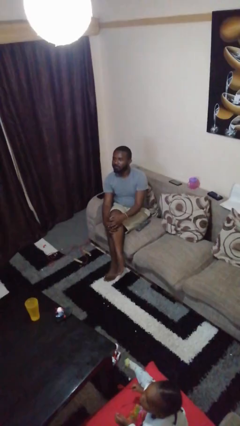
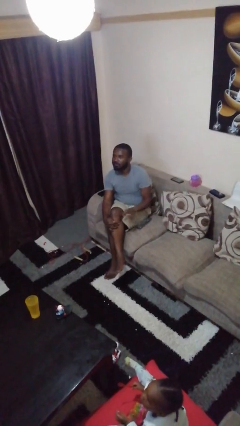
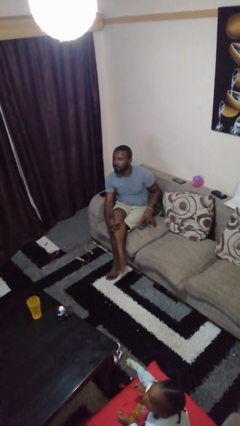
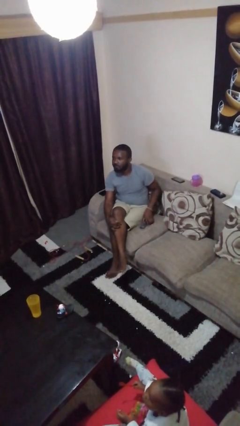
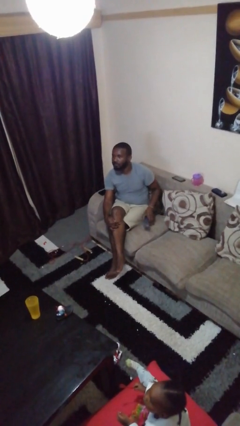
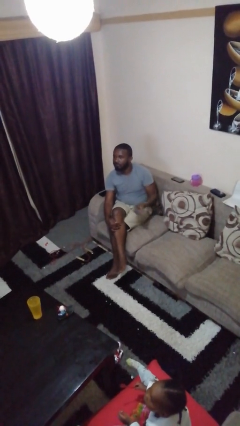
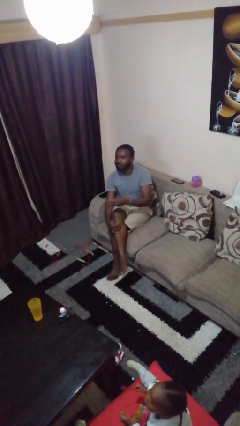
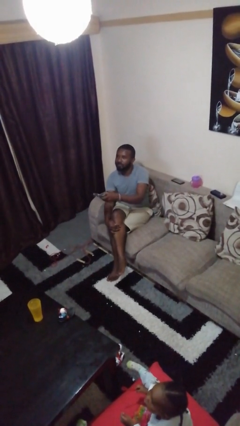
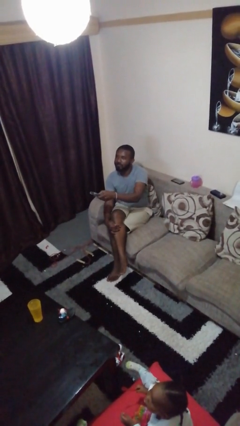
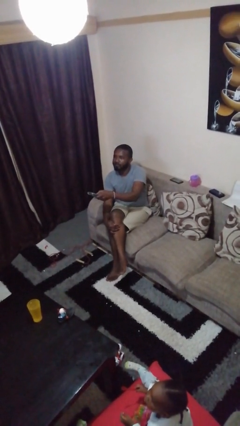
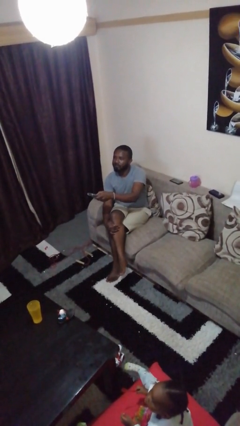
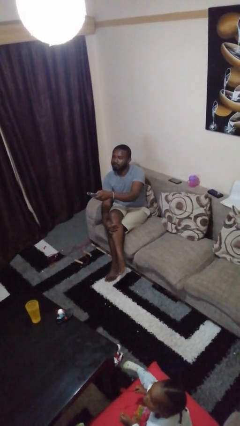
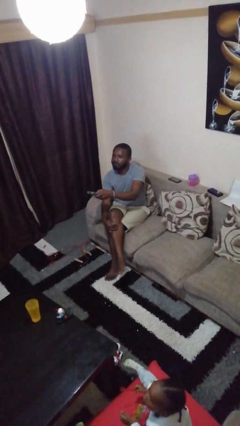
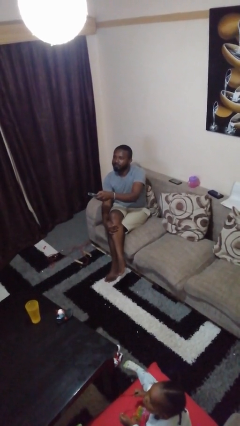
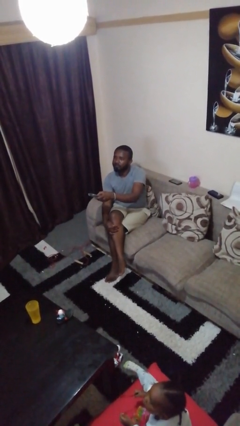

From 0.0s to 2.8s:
person uses television remote

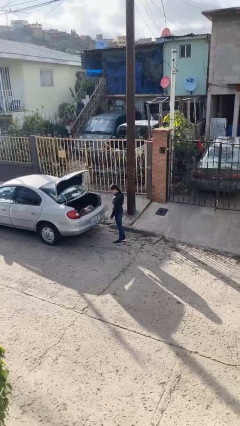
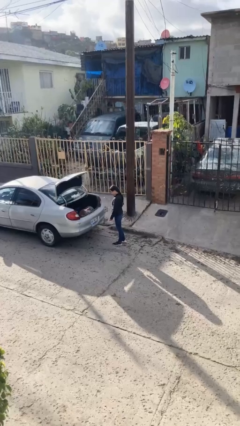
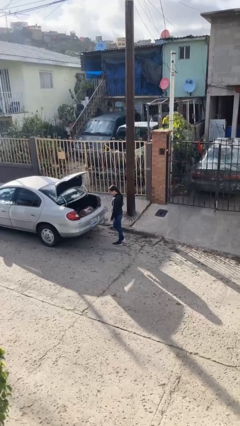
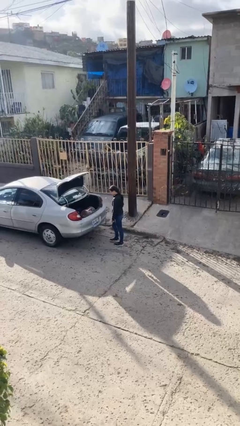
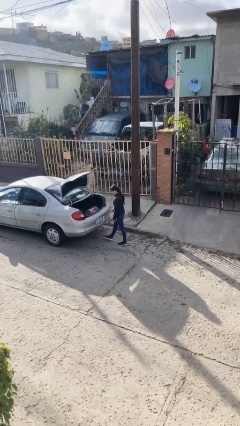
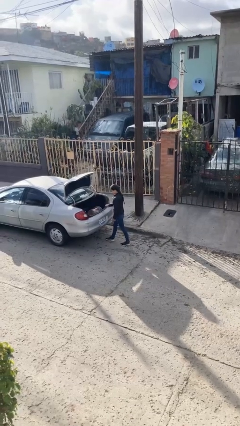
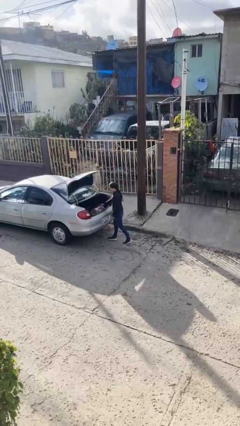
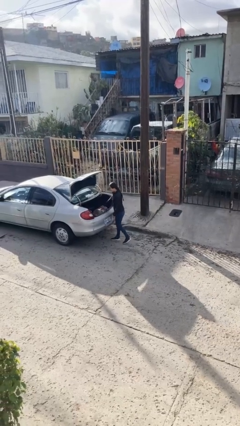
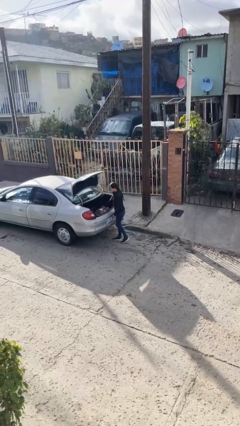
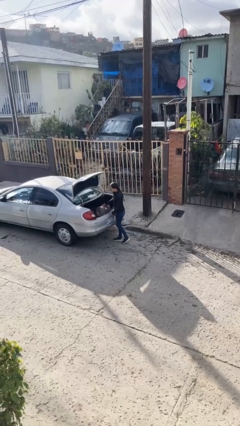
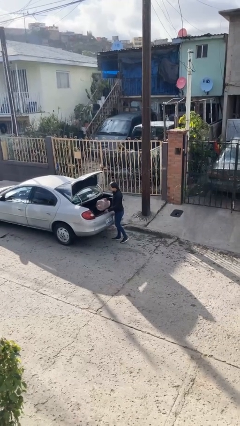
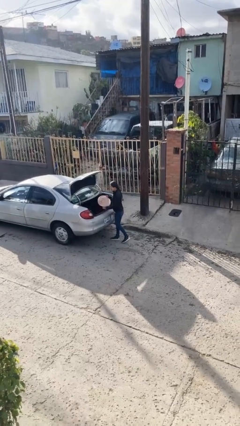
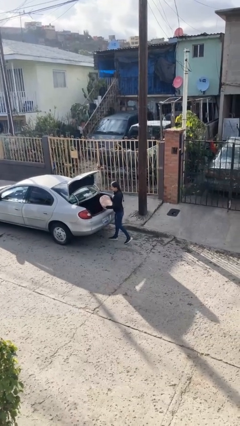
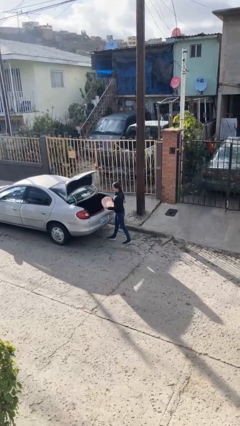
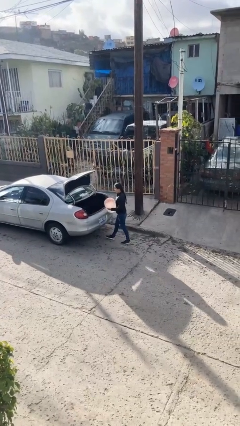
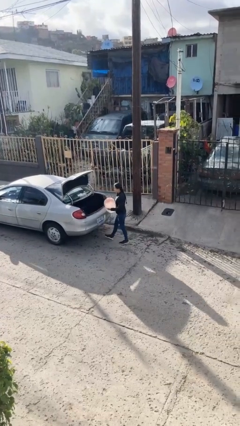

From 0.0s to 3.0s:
person unloads car

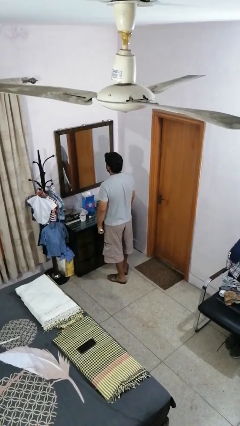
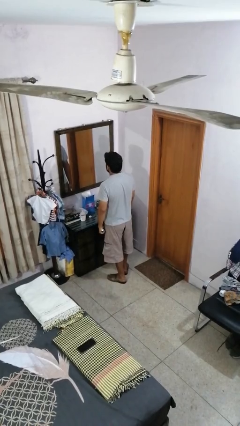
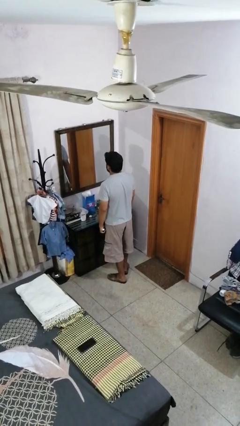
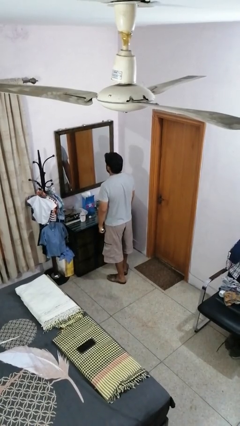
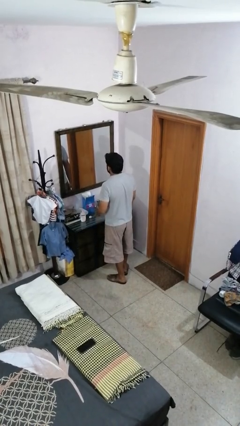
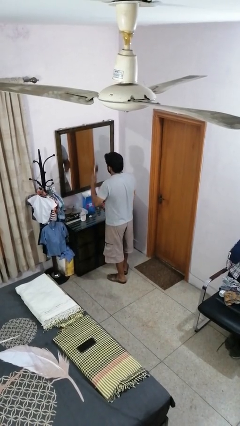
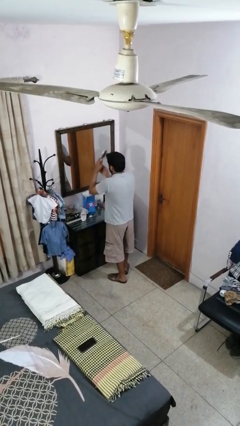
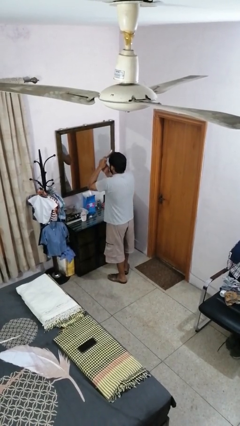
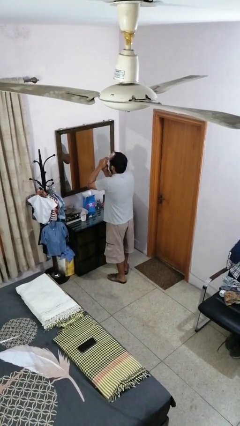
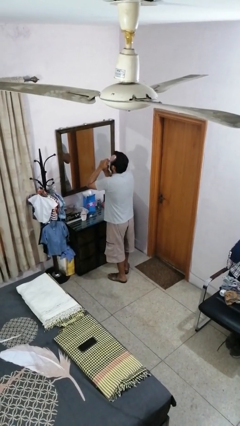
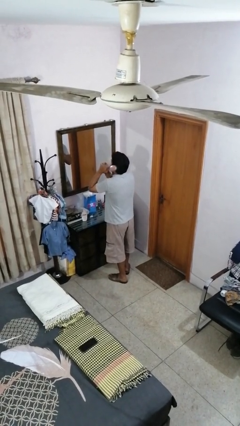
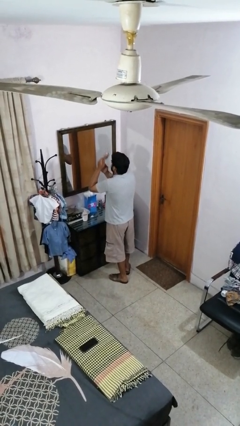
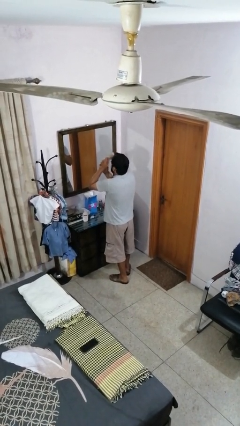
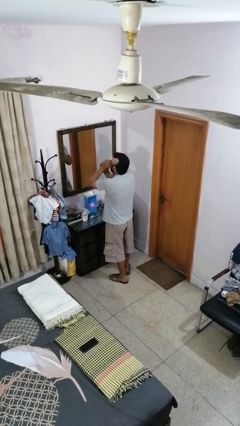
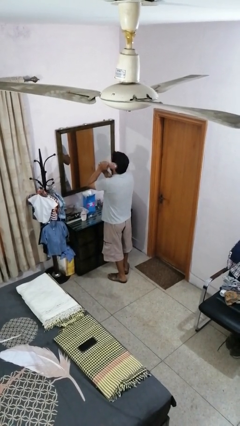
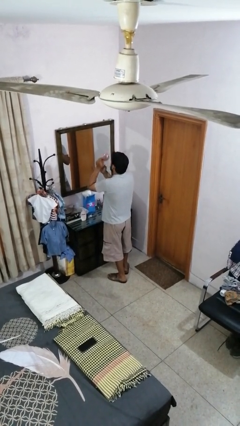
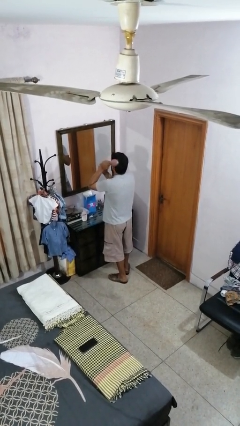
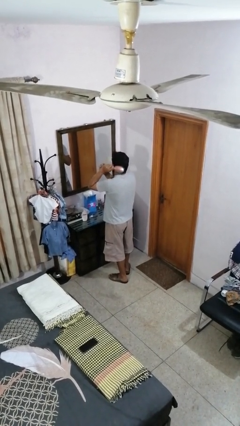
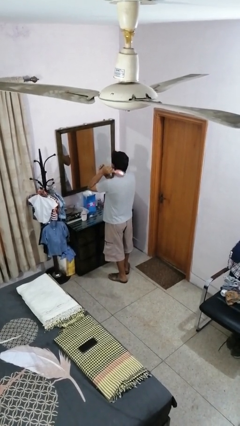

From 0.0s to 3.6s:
person brushes hair

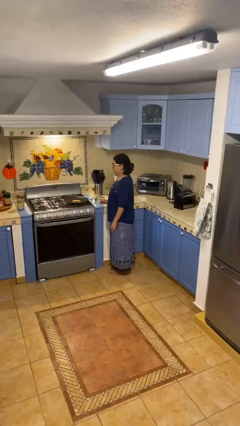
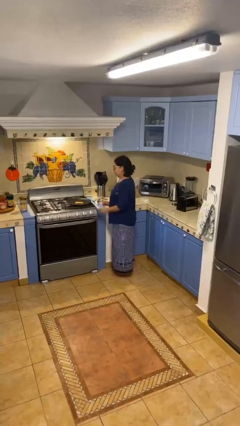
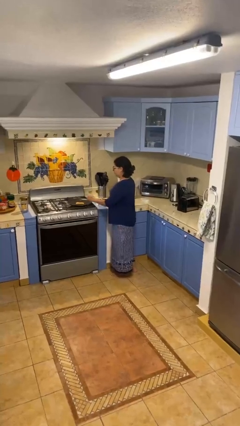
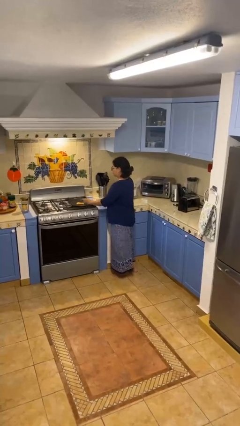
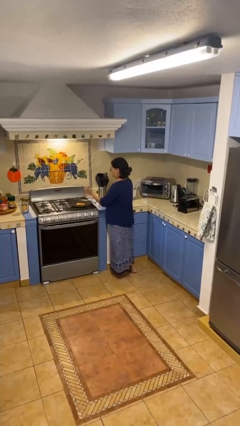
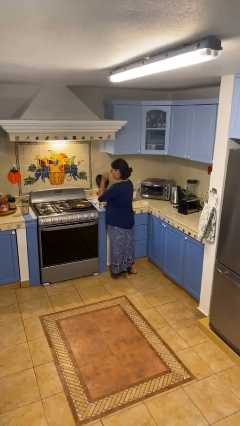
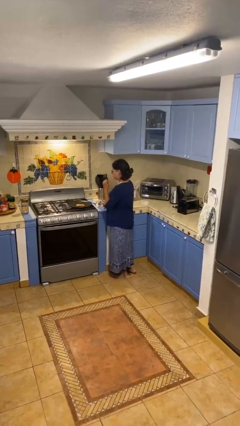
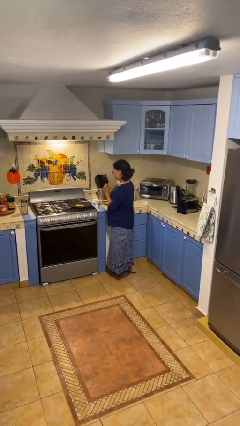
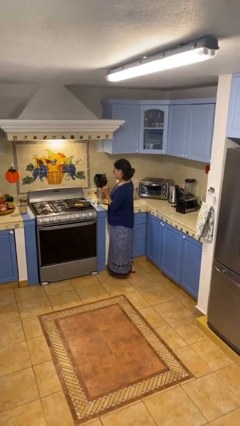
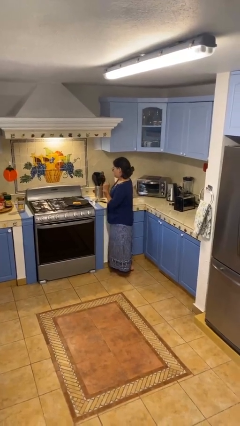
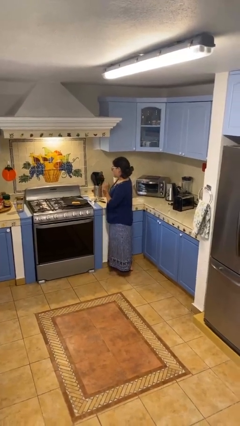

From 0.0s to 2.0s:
person burns hand

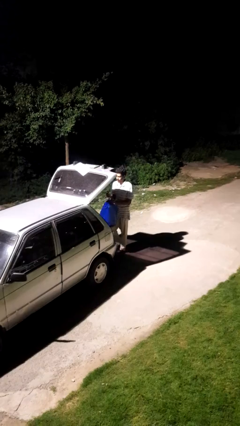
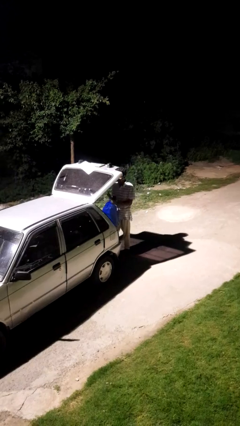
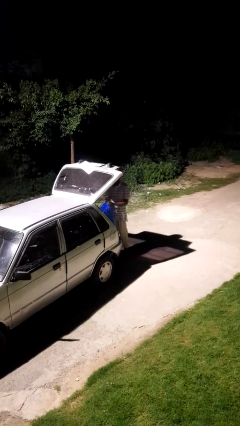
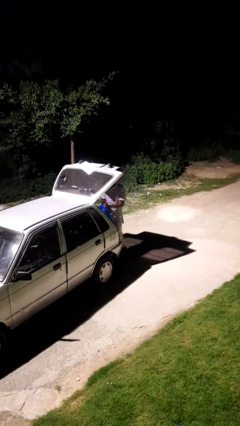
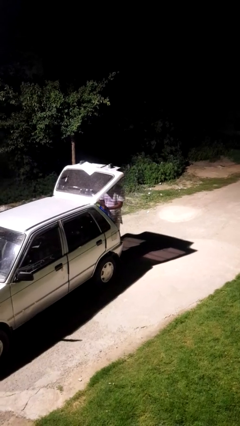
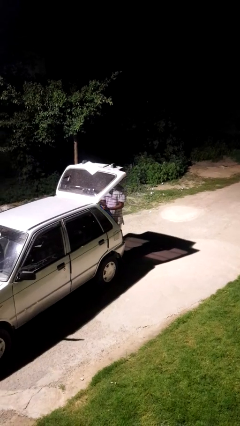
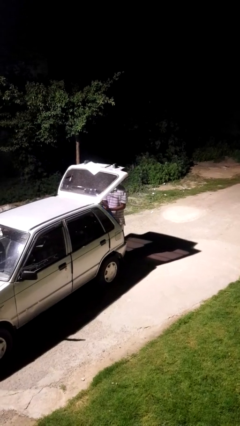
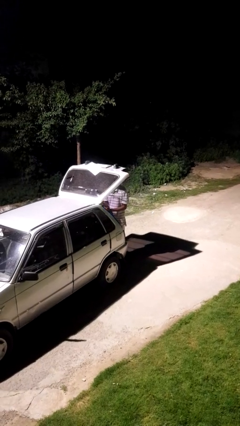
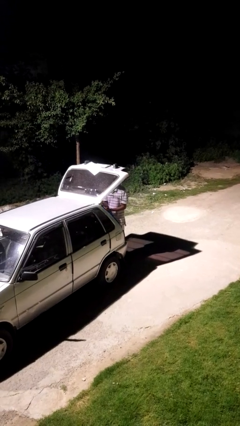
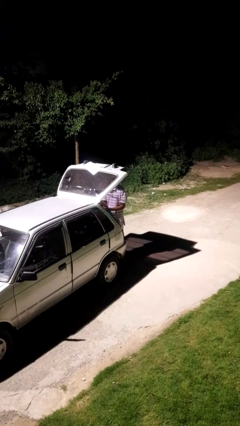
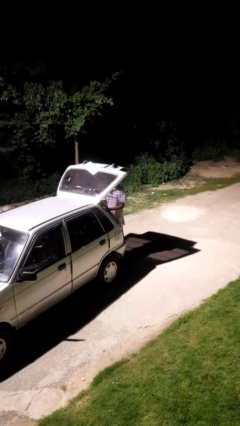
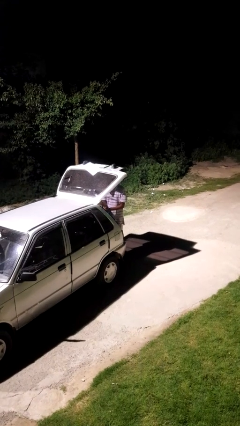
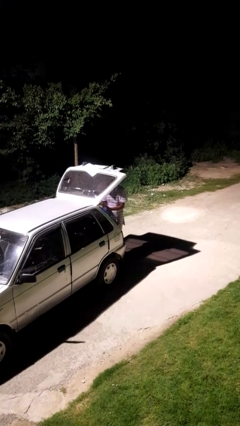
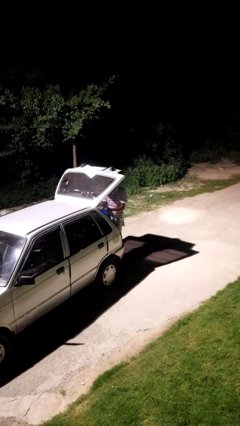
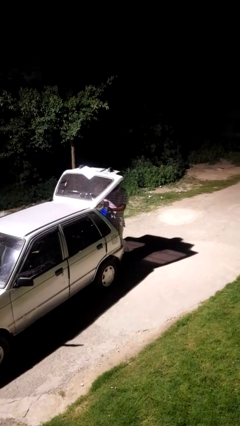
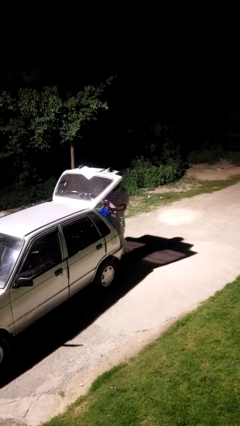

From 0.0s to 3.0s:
person loads car

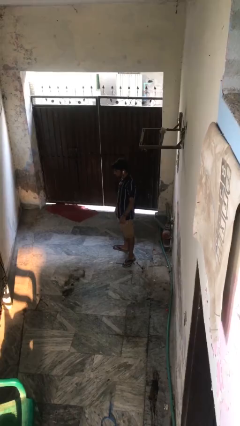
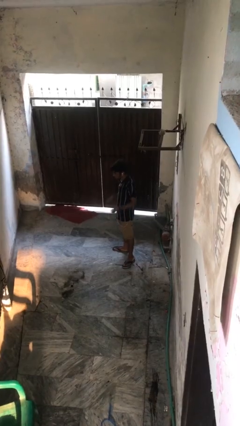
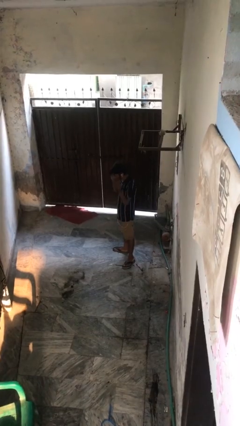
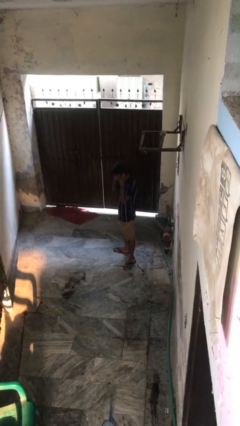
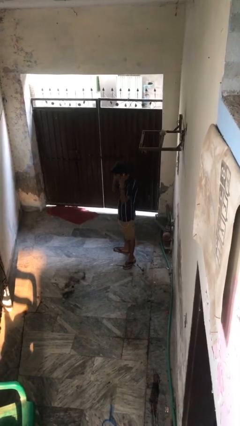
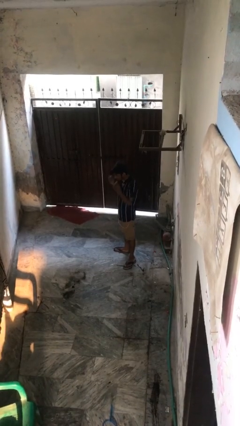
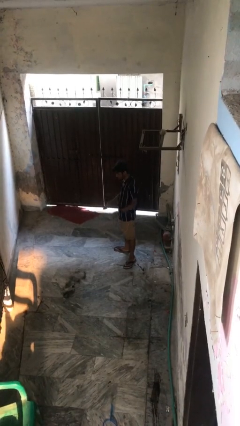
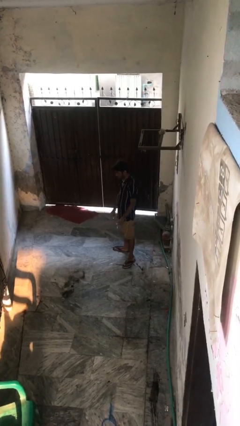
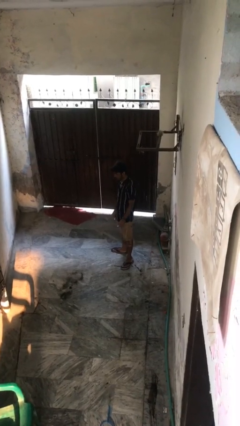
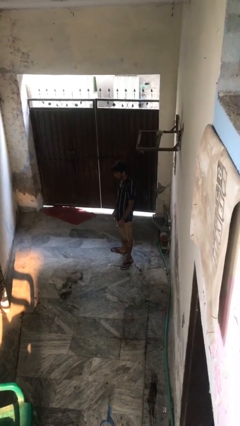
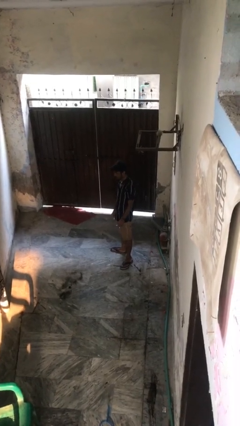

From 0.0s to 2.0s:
person takes off headphones

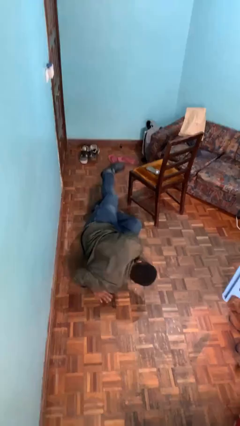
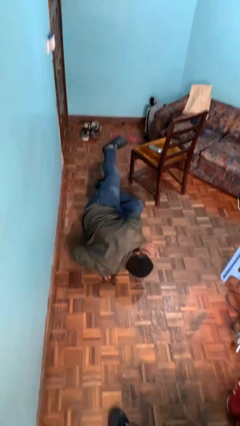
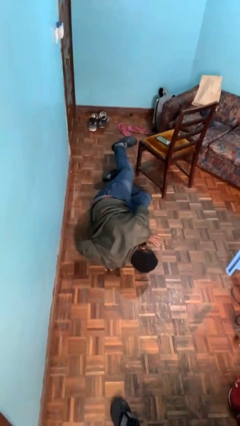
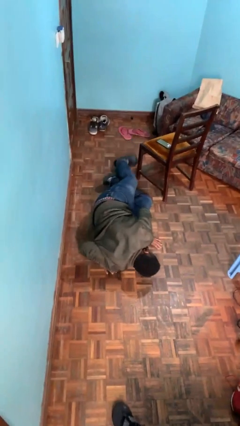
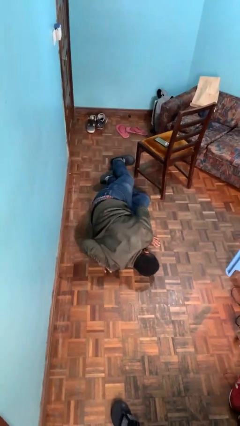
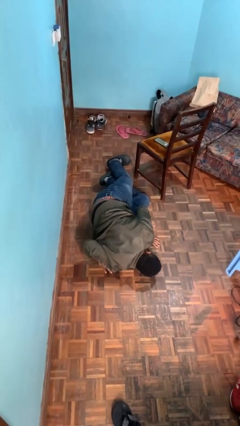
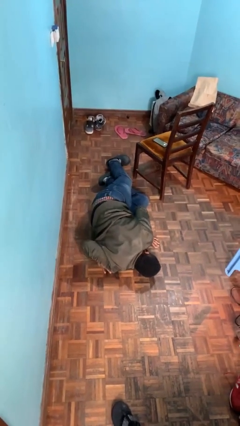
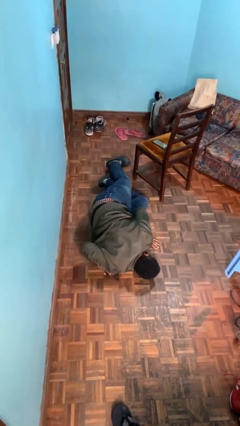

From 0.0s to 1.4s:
person lies down on floor
